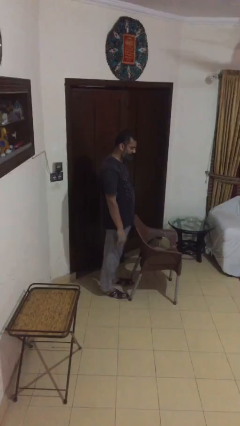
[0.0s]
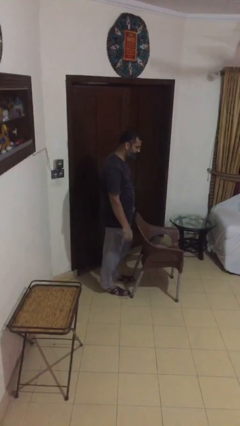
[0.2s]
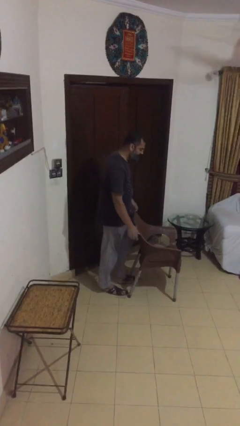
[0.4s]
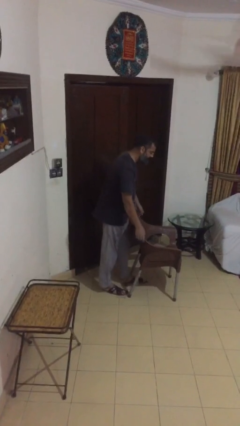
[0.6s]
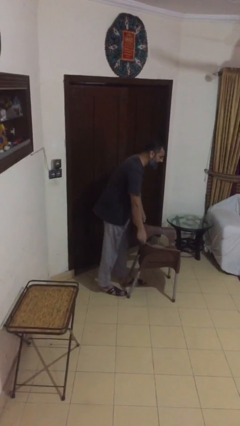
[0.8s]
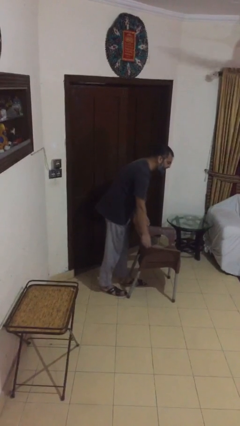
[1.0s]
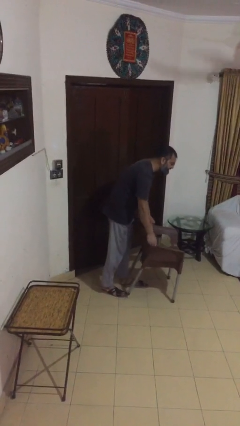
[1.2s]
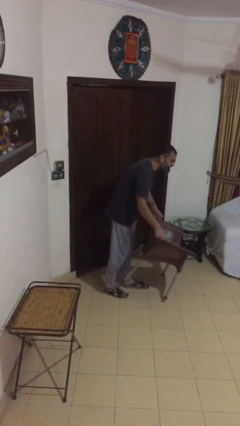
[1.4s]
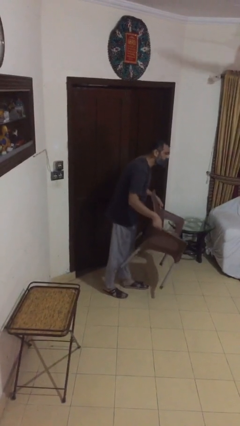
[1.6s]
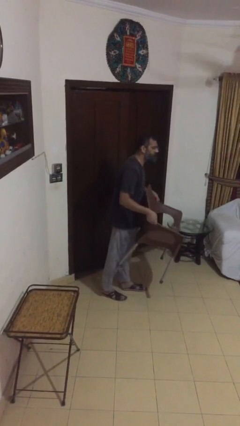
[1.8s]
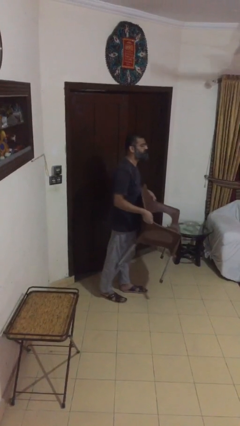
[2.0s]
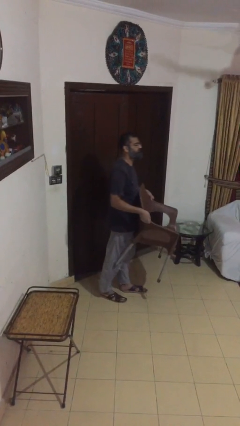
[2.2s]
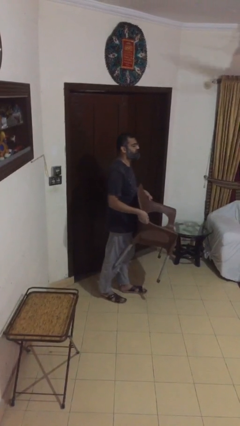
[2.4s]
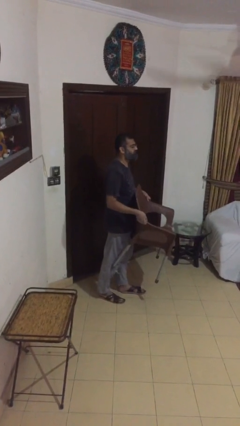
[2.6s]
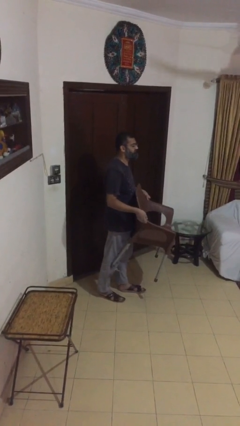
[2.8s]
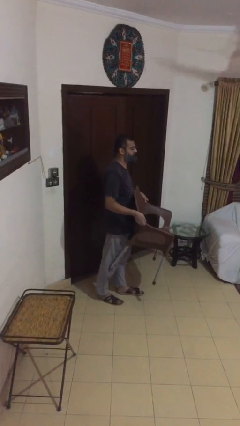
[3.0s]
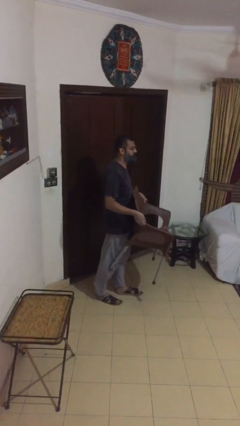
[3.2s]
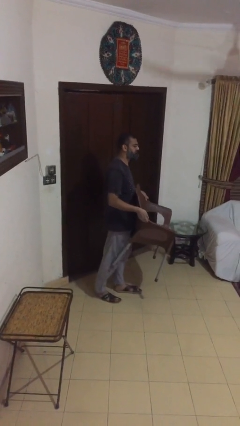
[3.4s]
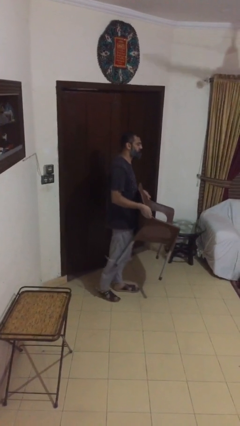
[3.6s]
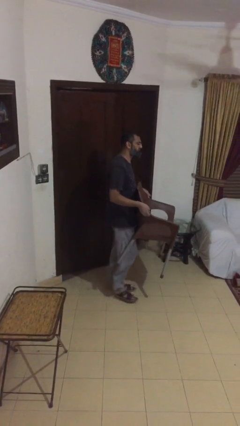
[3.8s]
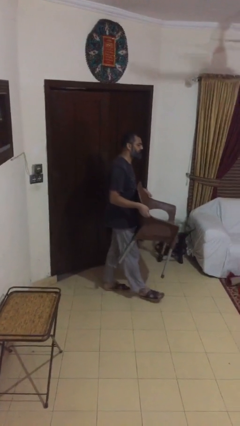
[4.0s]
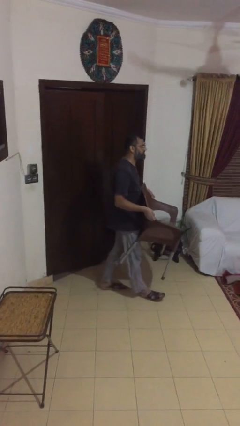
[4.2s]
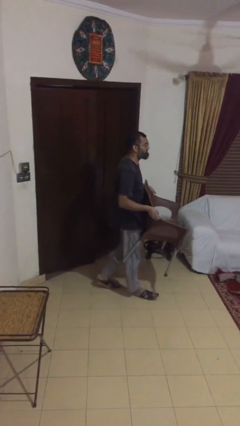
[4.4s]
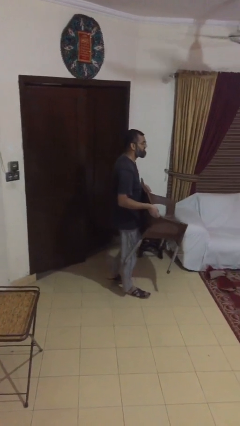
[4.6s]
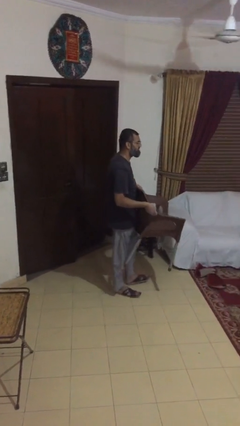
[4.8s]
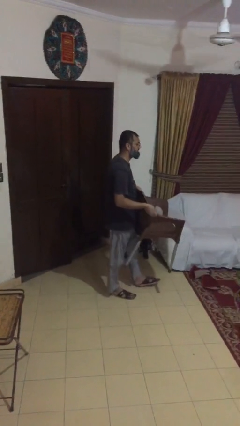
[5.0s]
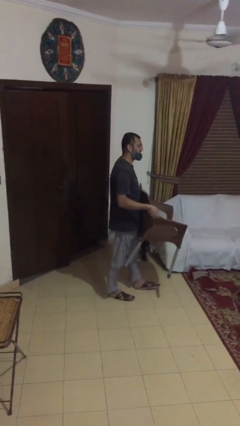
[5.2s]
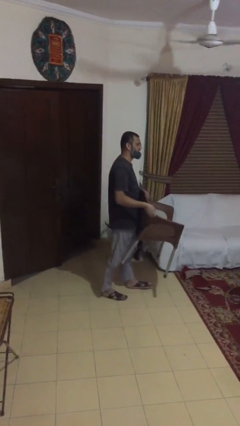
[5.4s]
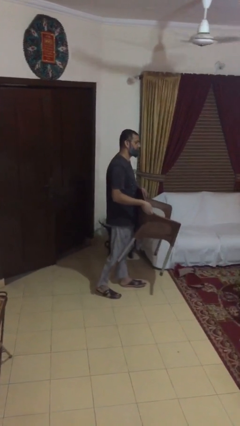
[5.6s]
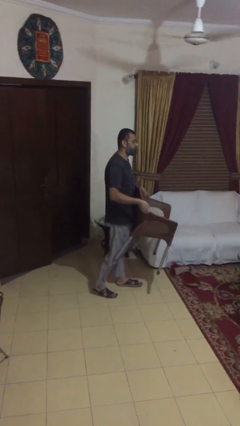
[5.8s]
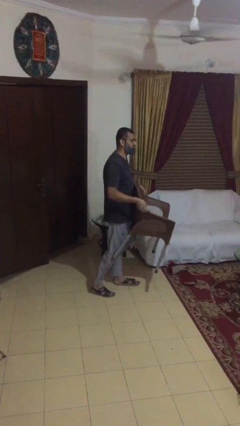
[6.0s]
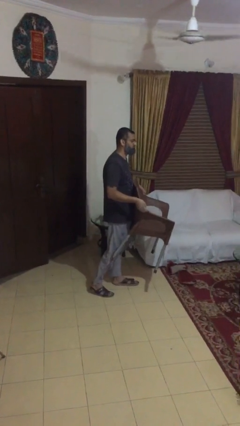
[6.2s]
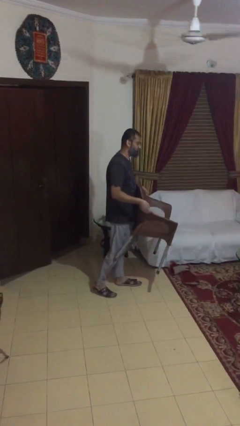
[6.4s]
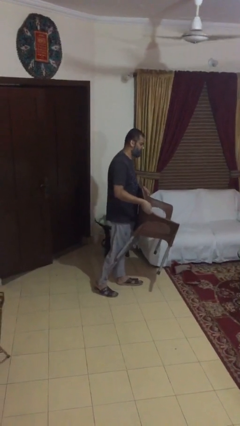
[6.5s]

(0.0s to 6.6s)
person carries heavy object

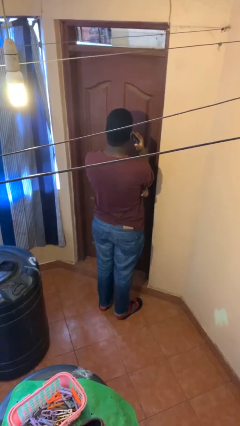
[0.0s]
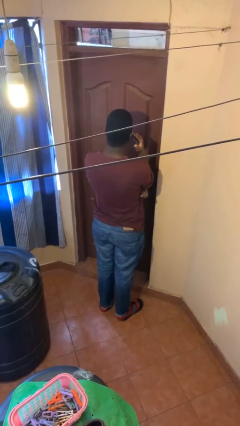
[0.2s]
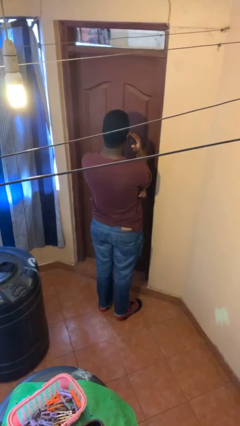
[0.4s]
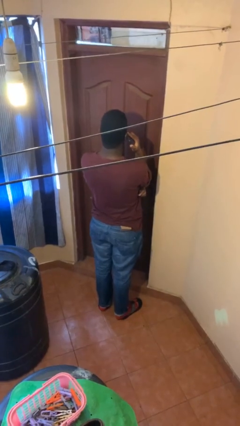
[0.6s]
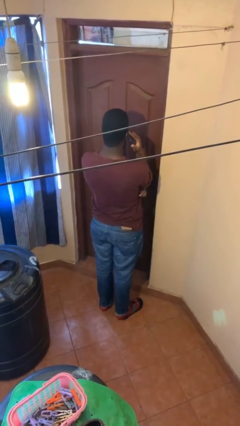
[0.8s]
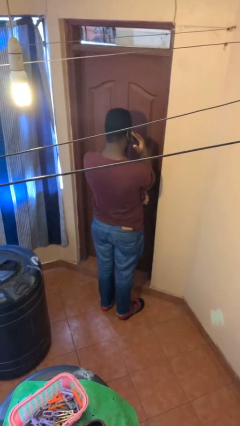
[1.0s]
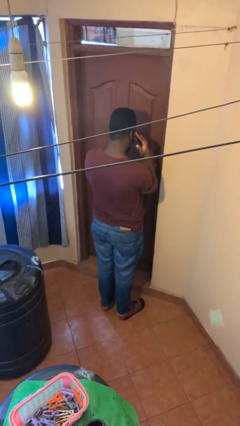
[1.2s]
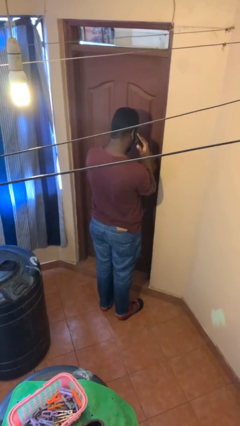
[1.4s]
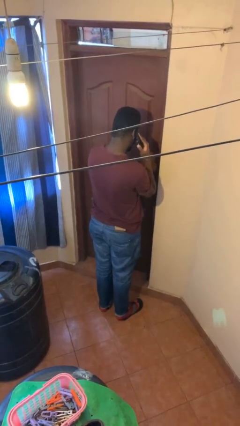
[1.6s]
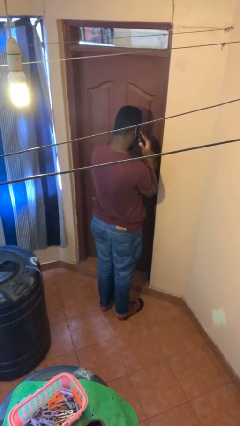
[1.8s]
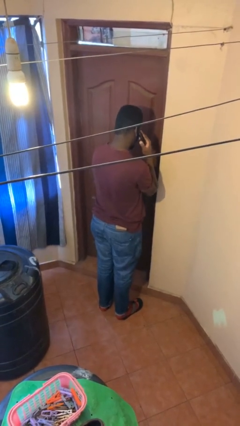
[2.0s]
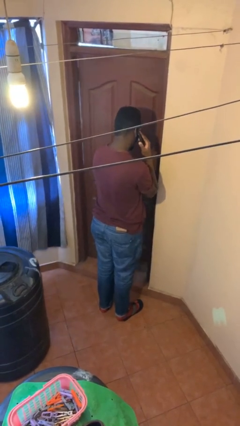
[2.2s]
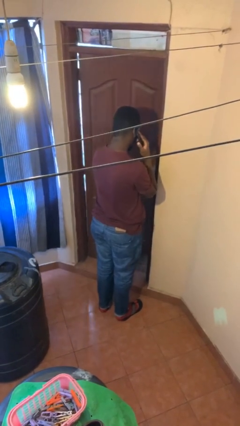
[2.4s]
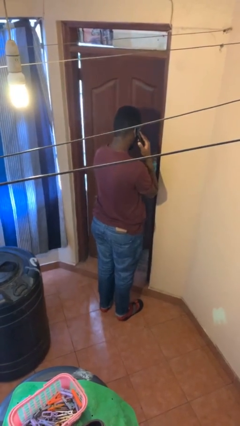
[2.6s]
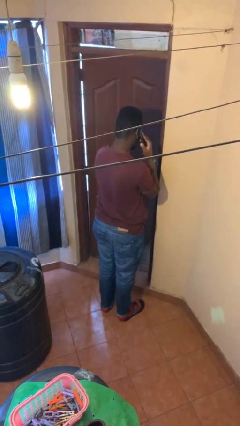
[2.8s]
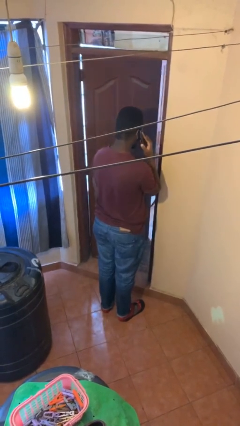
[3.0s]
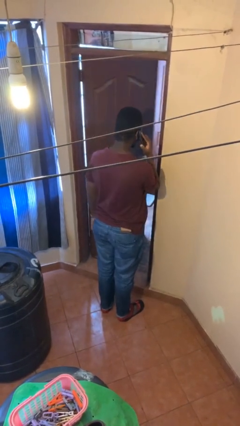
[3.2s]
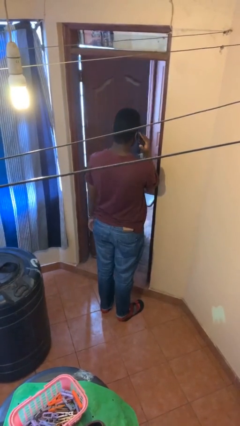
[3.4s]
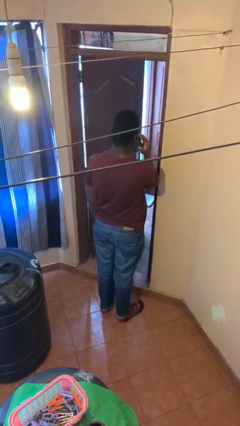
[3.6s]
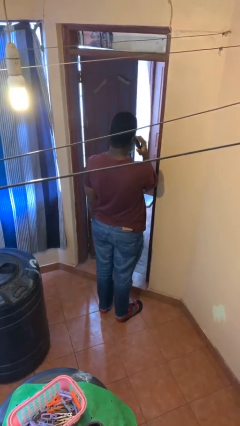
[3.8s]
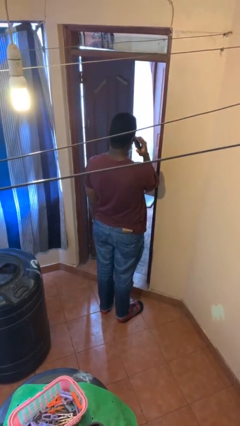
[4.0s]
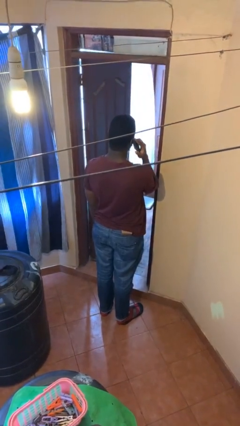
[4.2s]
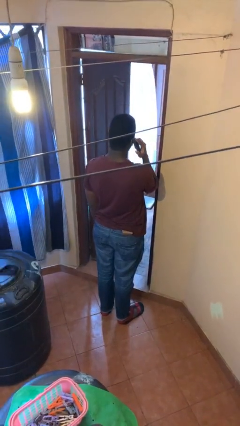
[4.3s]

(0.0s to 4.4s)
person opens facility door

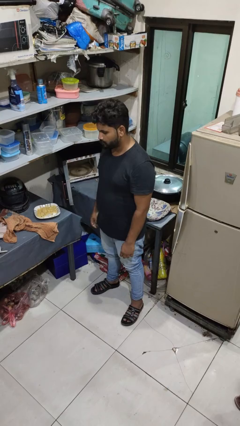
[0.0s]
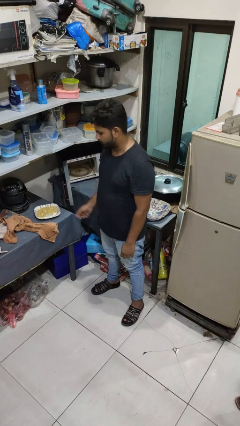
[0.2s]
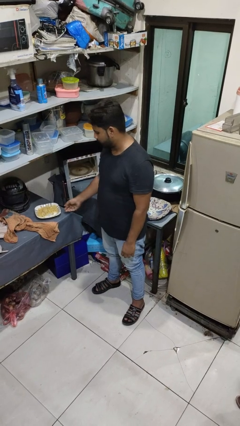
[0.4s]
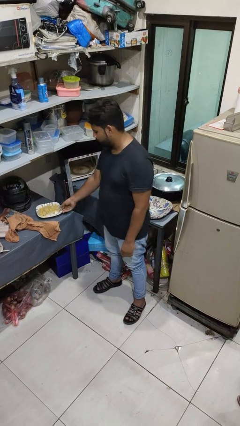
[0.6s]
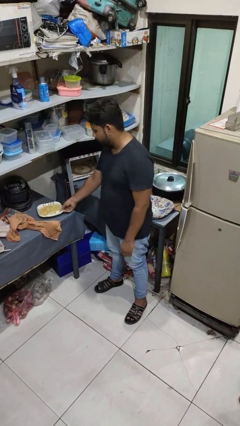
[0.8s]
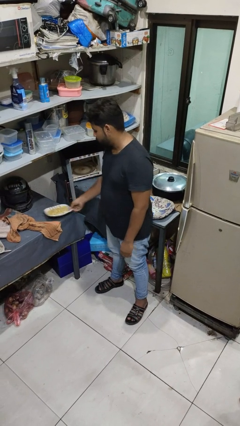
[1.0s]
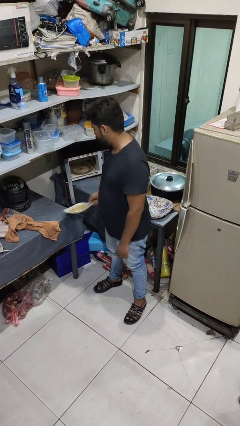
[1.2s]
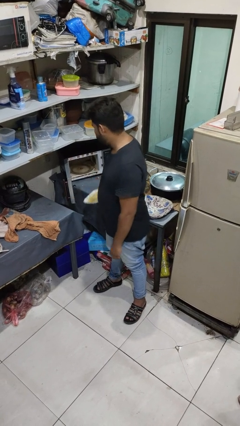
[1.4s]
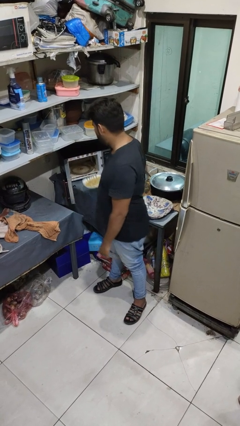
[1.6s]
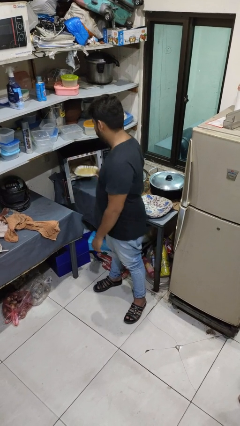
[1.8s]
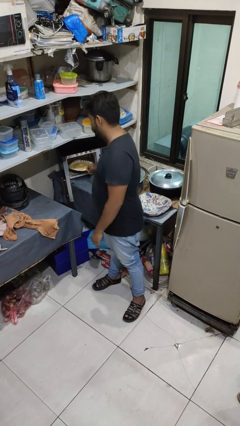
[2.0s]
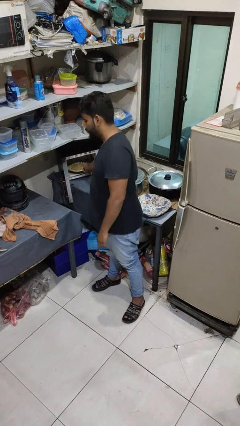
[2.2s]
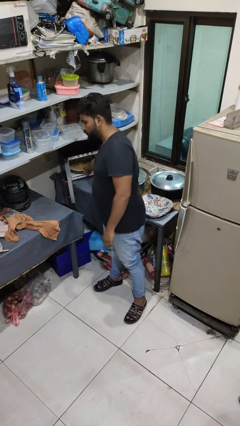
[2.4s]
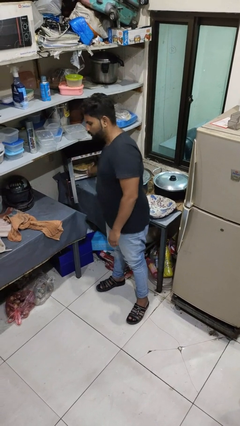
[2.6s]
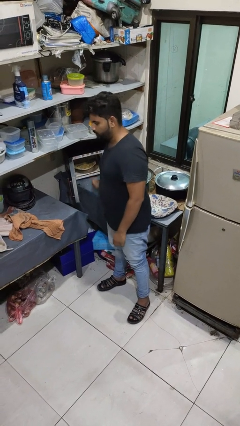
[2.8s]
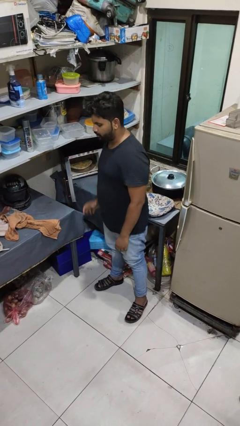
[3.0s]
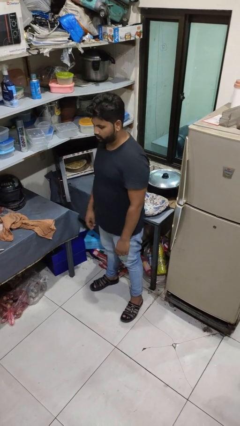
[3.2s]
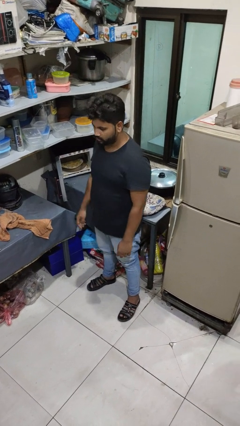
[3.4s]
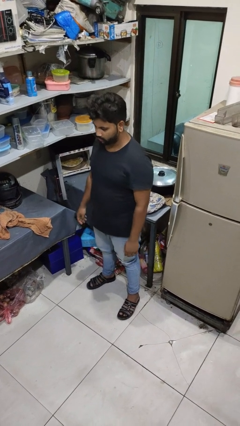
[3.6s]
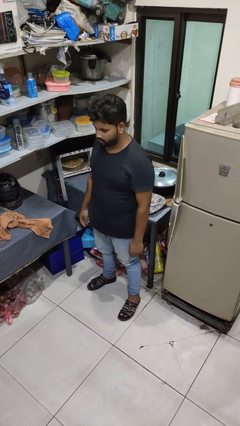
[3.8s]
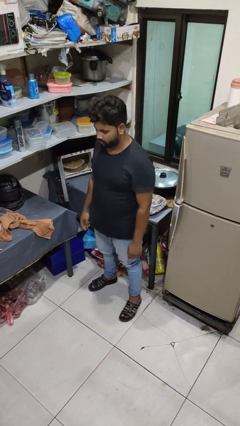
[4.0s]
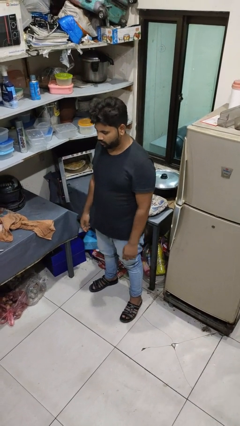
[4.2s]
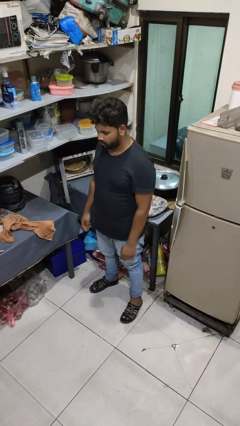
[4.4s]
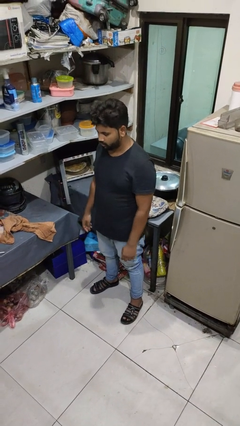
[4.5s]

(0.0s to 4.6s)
person puts object into microwave

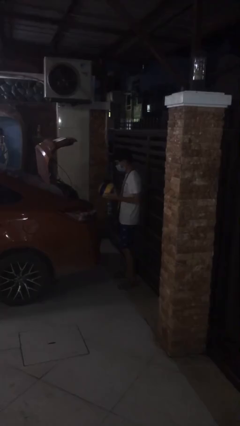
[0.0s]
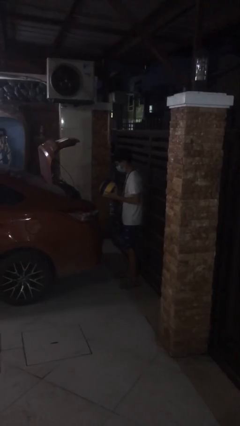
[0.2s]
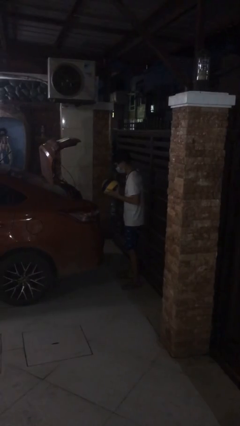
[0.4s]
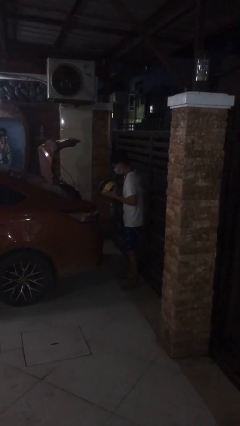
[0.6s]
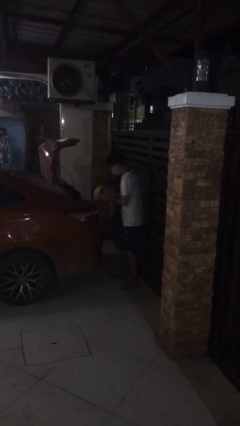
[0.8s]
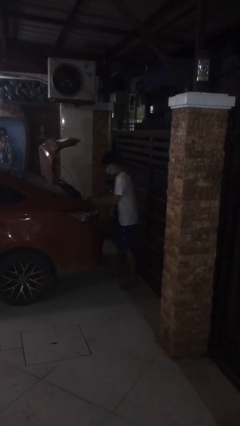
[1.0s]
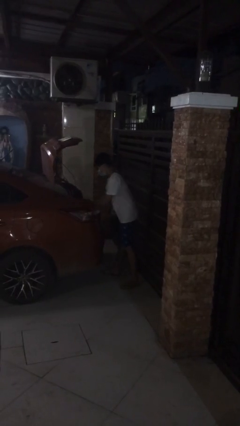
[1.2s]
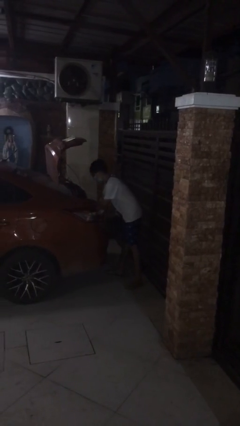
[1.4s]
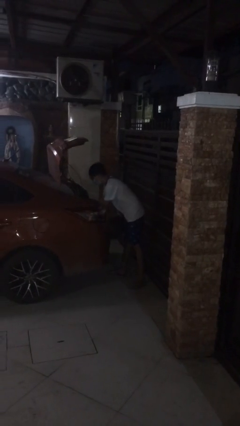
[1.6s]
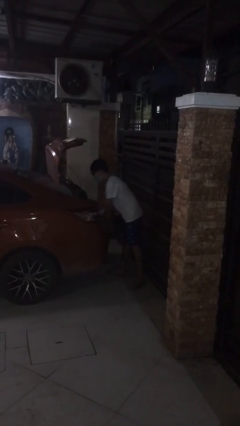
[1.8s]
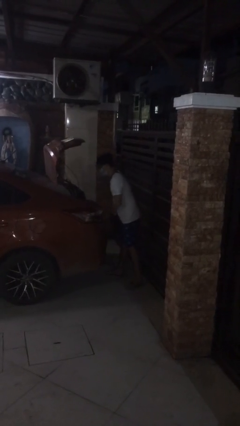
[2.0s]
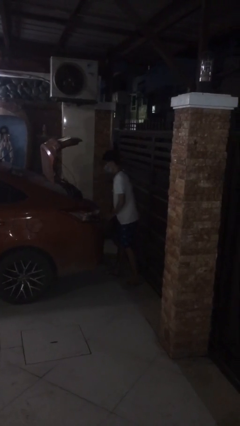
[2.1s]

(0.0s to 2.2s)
person loads car
